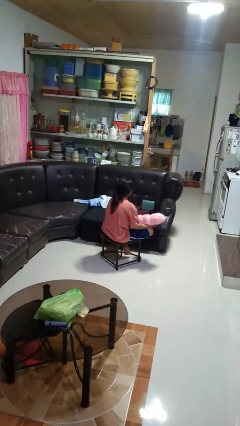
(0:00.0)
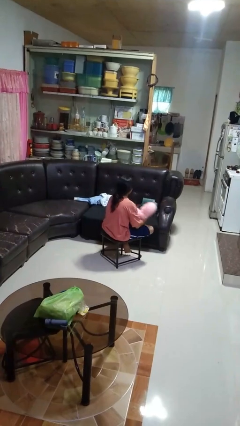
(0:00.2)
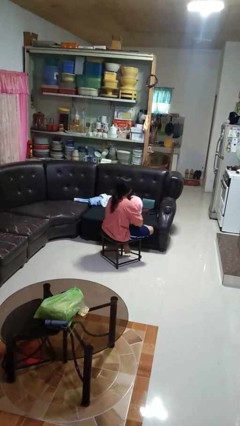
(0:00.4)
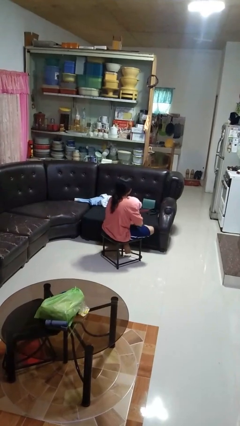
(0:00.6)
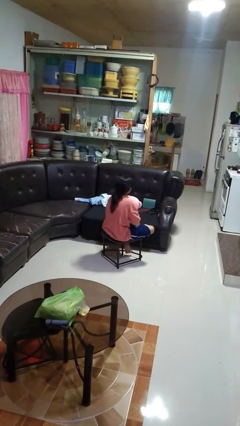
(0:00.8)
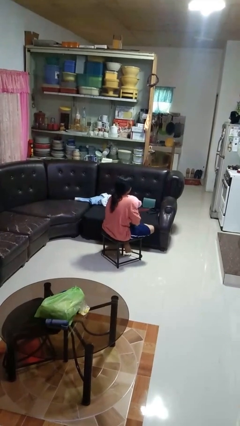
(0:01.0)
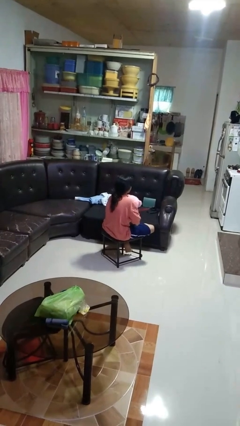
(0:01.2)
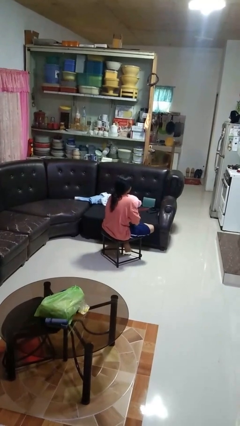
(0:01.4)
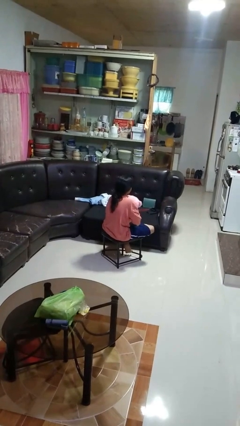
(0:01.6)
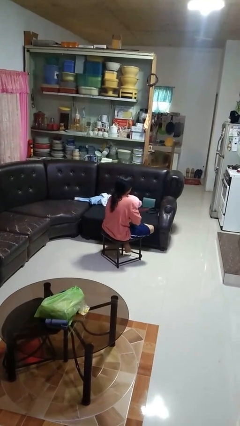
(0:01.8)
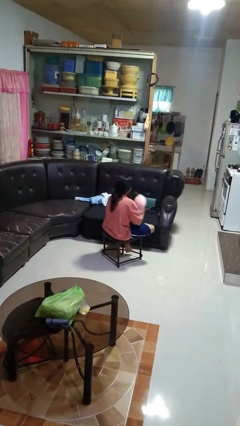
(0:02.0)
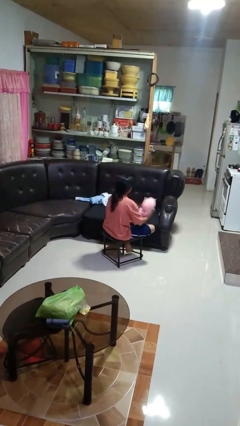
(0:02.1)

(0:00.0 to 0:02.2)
person hugs stuffed animal

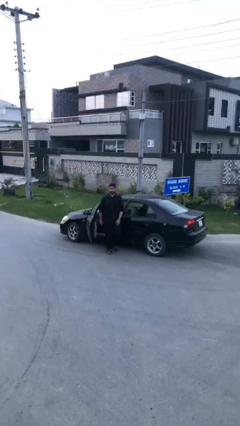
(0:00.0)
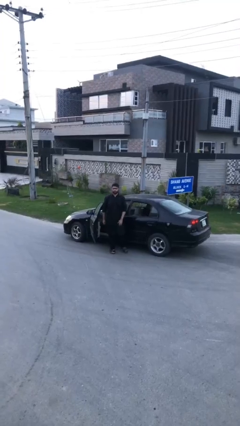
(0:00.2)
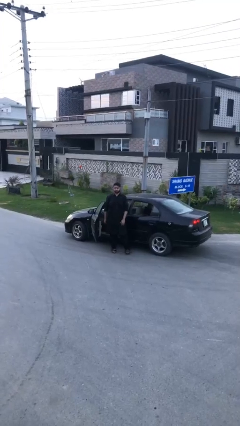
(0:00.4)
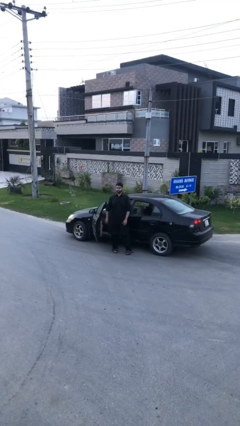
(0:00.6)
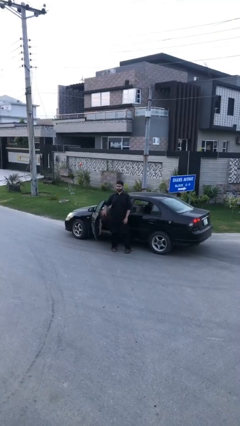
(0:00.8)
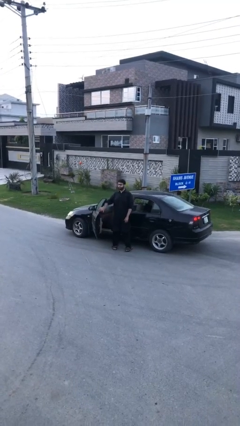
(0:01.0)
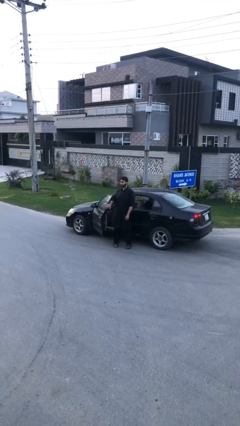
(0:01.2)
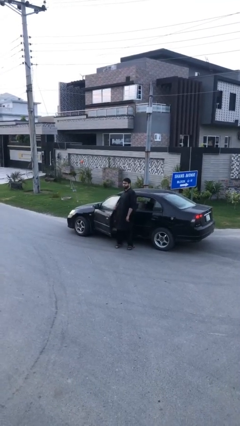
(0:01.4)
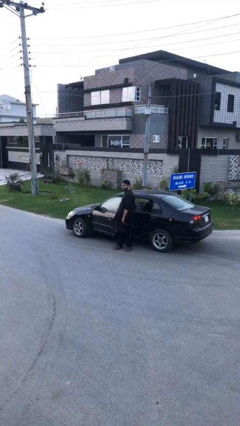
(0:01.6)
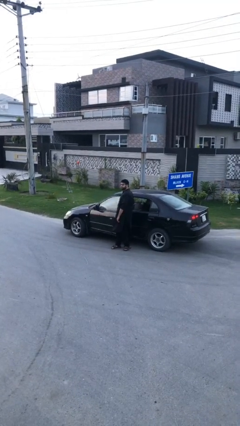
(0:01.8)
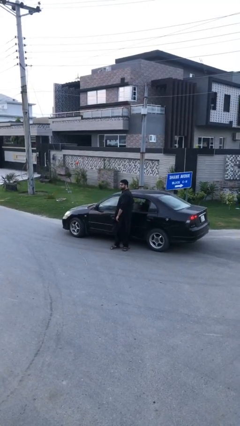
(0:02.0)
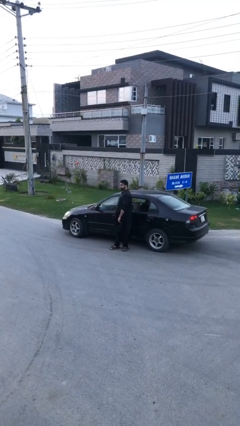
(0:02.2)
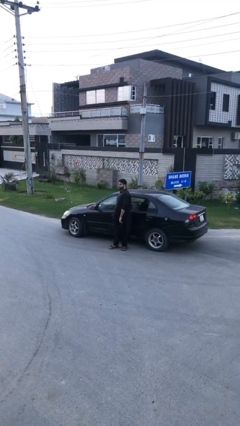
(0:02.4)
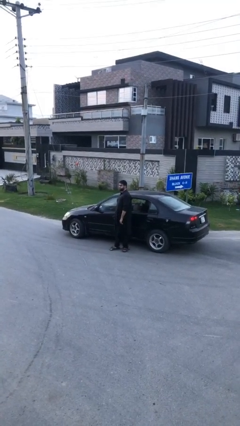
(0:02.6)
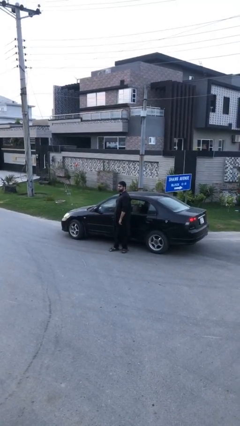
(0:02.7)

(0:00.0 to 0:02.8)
person closes car door

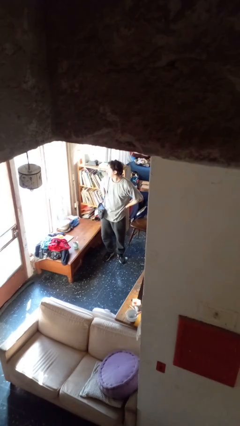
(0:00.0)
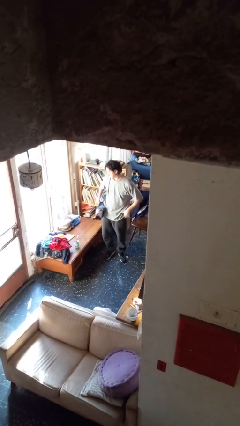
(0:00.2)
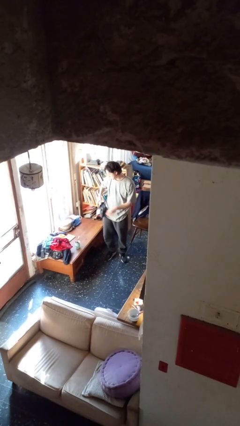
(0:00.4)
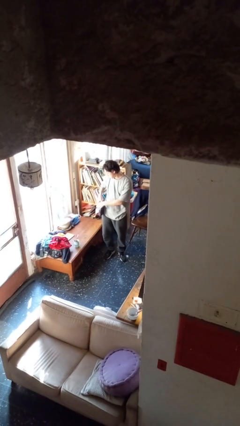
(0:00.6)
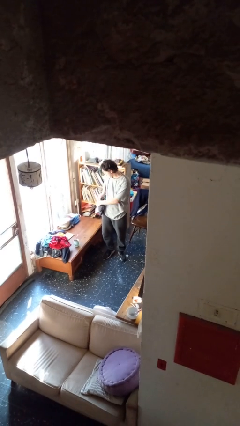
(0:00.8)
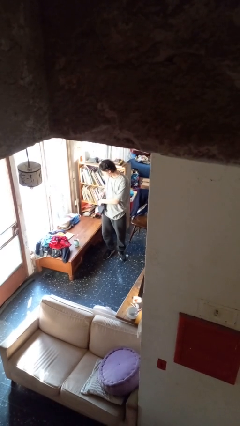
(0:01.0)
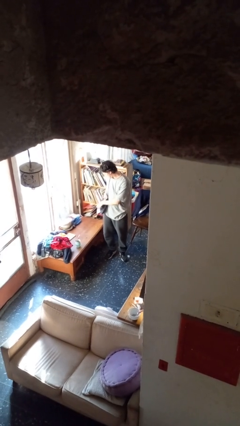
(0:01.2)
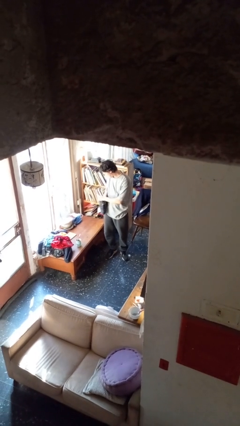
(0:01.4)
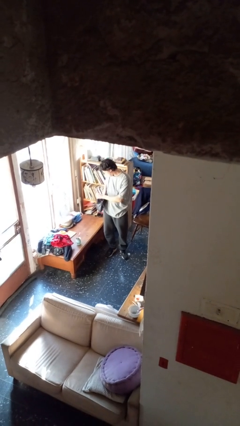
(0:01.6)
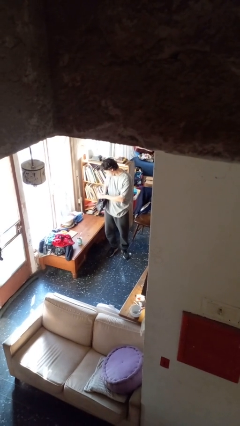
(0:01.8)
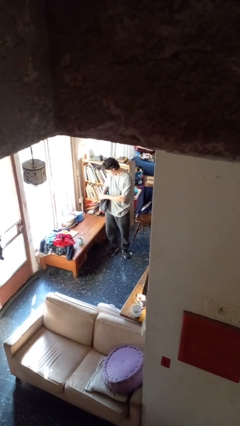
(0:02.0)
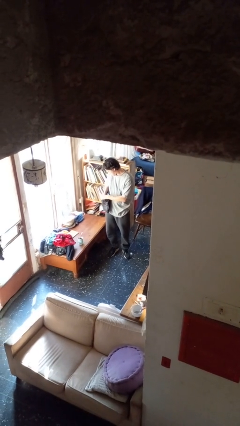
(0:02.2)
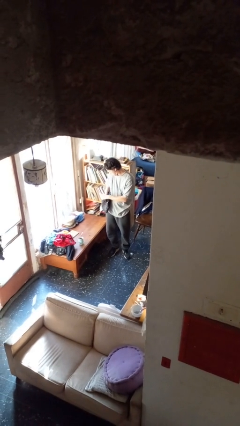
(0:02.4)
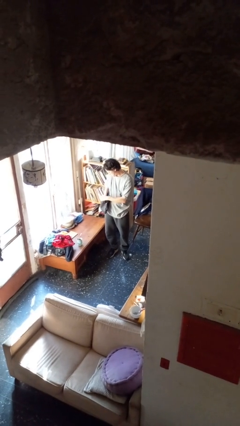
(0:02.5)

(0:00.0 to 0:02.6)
person searches in purse

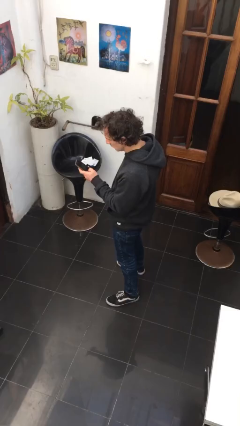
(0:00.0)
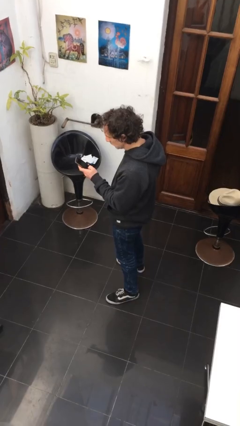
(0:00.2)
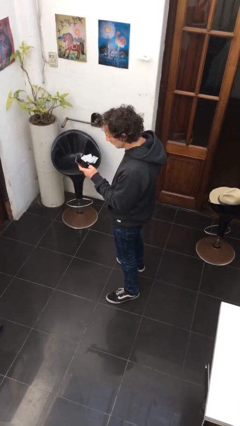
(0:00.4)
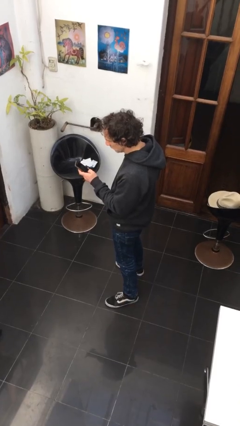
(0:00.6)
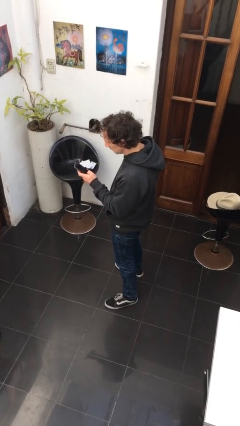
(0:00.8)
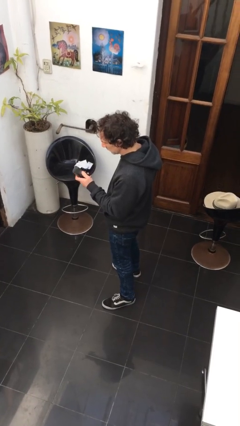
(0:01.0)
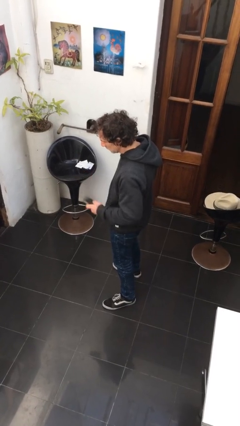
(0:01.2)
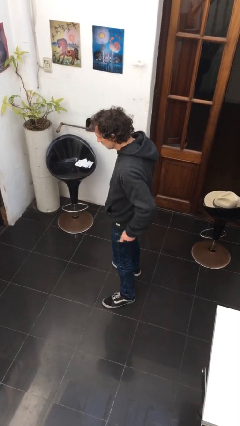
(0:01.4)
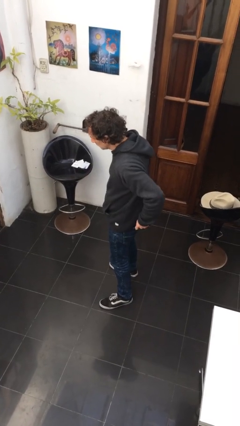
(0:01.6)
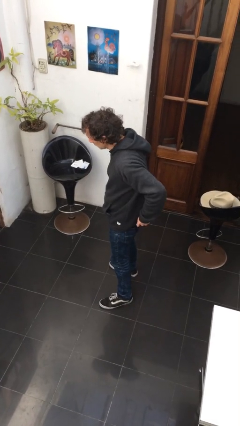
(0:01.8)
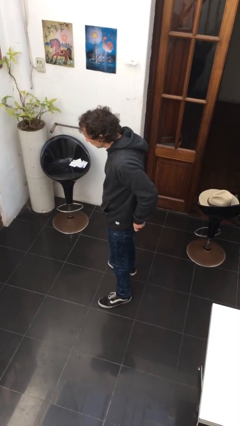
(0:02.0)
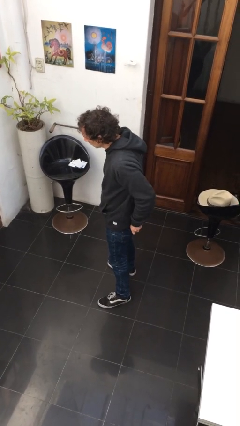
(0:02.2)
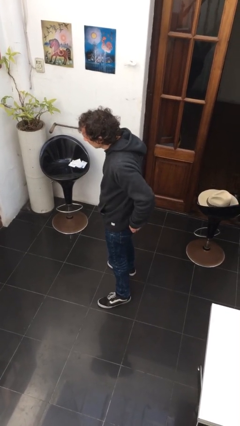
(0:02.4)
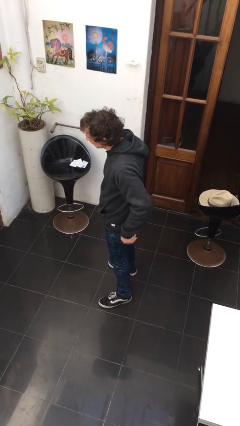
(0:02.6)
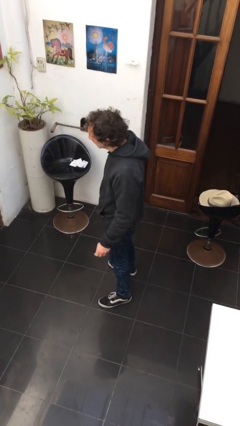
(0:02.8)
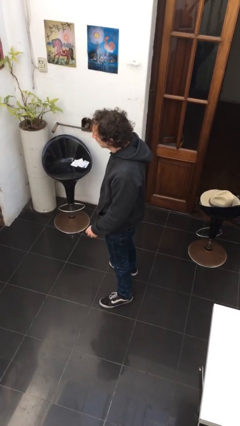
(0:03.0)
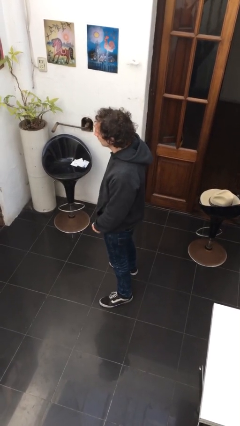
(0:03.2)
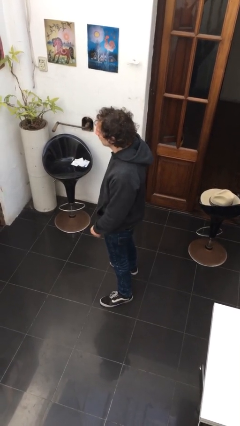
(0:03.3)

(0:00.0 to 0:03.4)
person puts phone into pocket

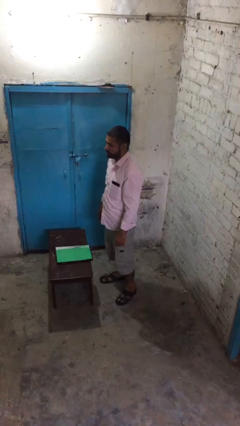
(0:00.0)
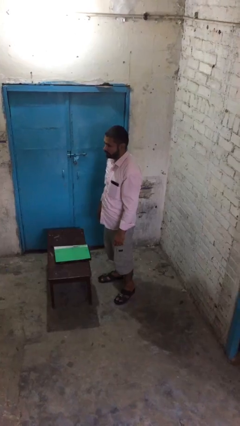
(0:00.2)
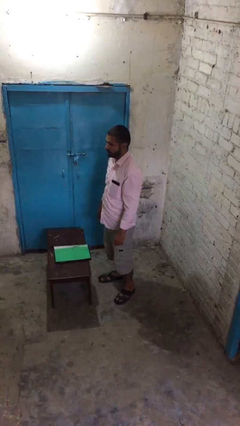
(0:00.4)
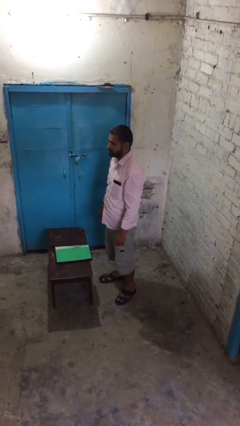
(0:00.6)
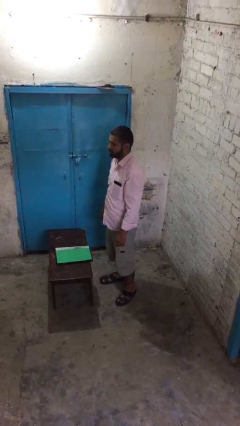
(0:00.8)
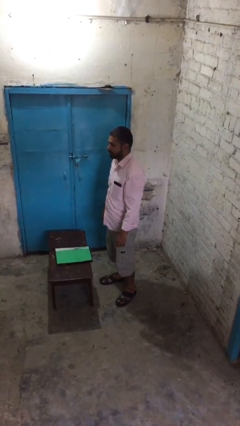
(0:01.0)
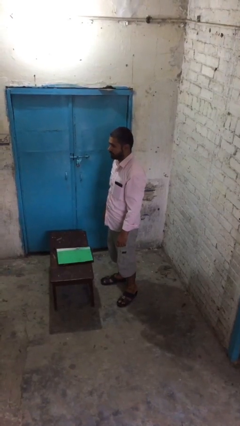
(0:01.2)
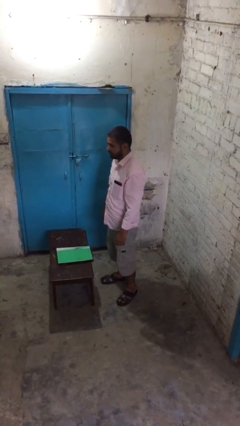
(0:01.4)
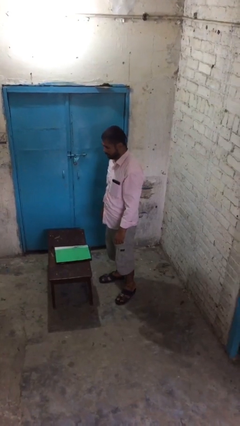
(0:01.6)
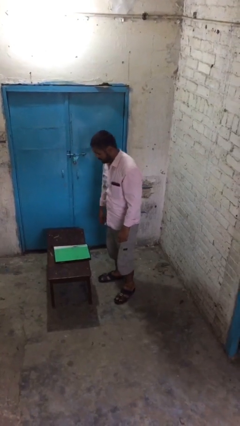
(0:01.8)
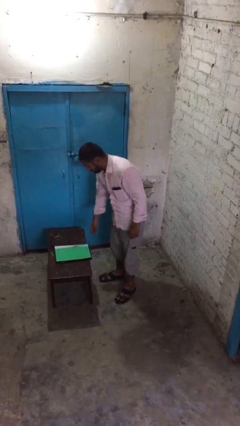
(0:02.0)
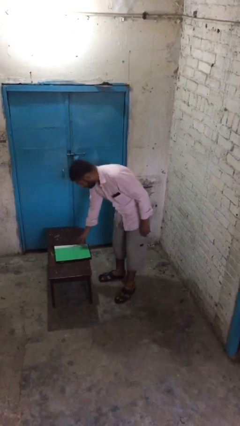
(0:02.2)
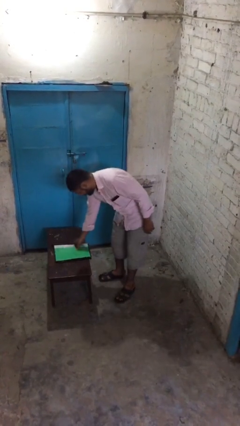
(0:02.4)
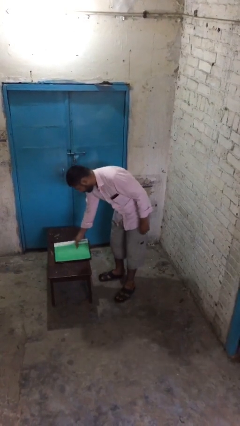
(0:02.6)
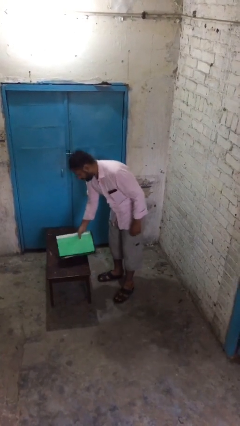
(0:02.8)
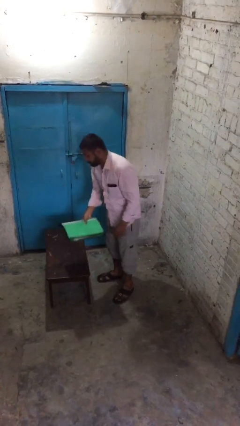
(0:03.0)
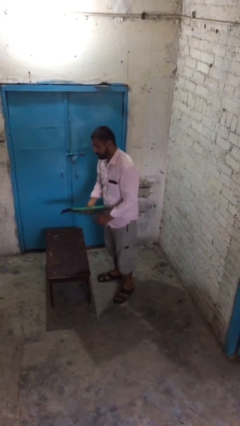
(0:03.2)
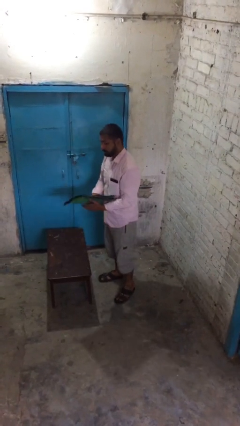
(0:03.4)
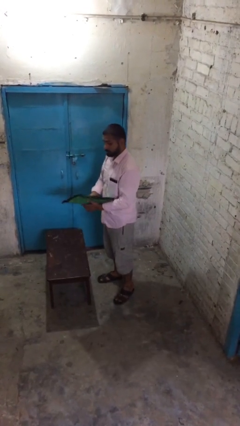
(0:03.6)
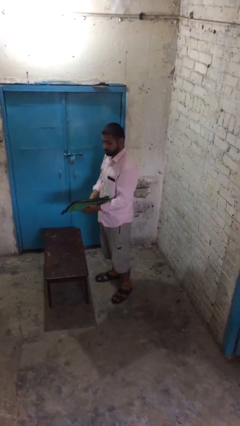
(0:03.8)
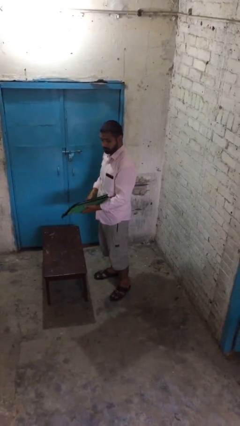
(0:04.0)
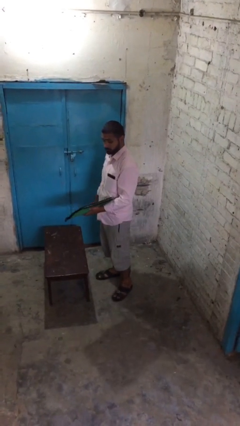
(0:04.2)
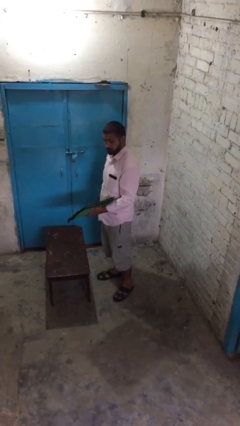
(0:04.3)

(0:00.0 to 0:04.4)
person picks up object from table

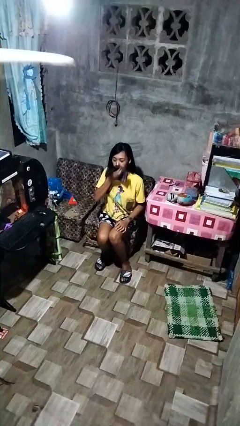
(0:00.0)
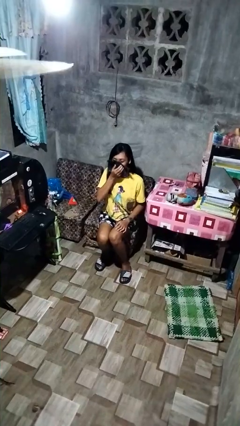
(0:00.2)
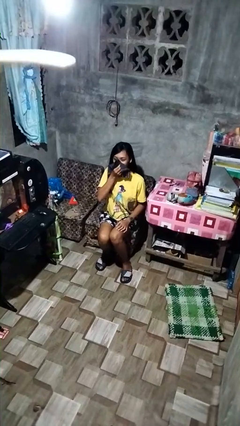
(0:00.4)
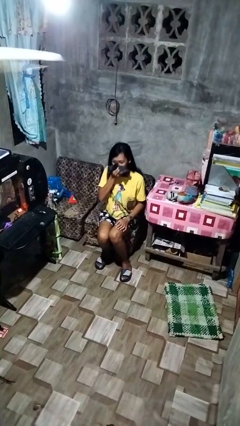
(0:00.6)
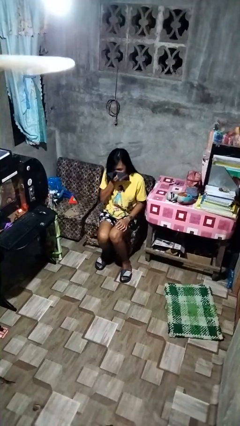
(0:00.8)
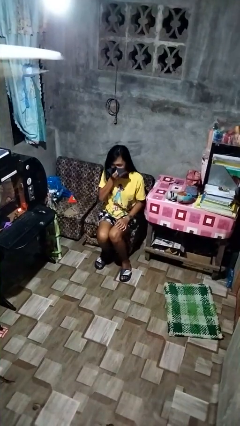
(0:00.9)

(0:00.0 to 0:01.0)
person blows nose

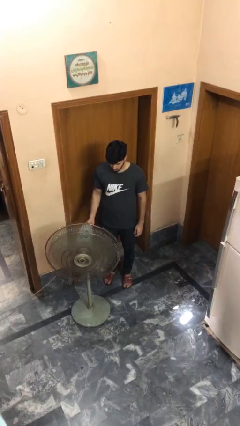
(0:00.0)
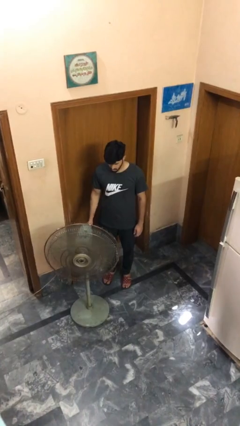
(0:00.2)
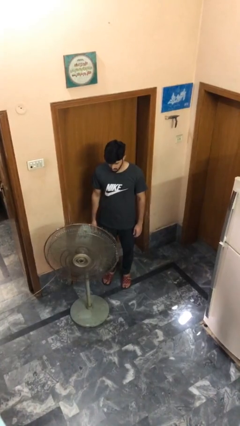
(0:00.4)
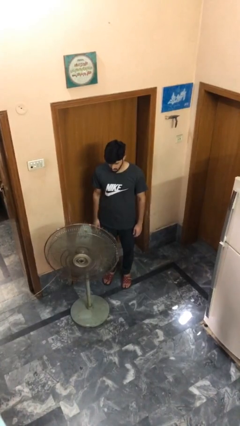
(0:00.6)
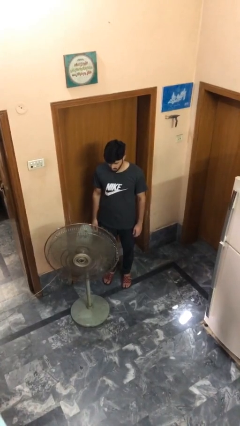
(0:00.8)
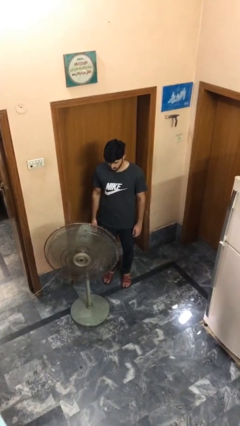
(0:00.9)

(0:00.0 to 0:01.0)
person turns off fan
